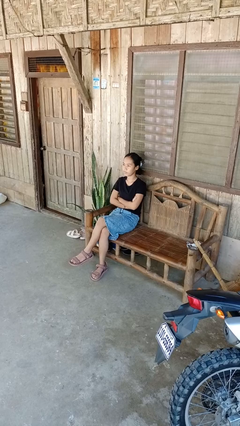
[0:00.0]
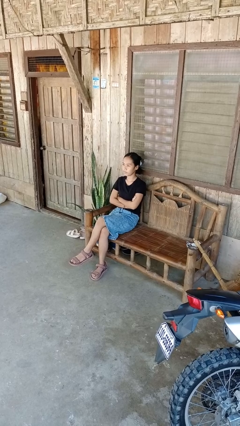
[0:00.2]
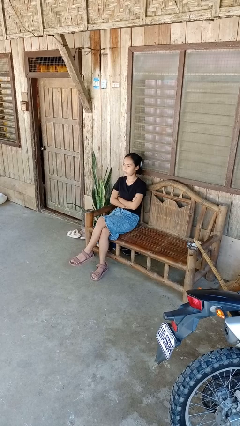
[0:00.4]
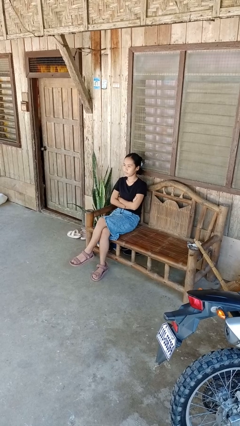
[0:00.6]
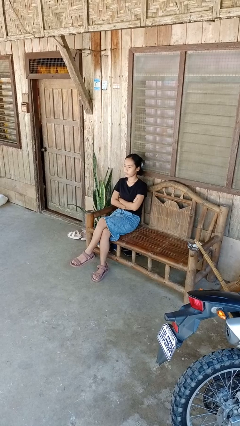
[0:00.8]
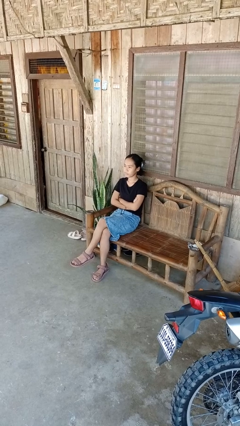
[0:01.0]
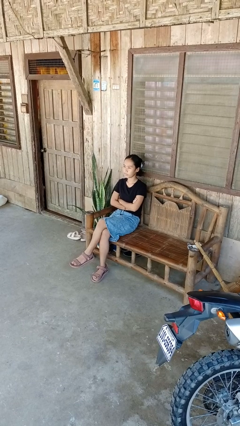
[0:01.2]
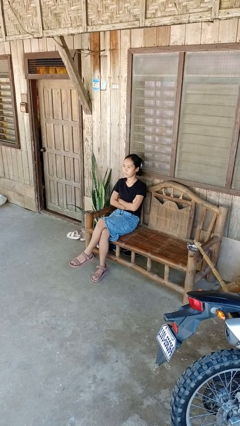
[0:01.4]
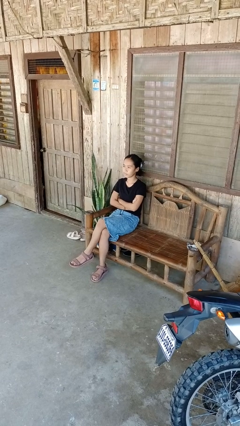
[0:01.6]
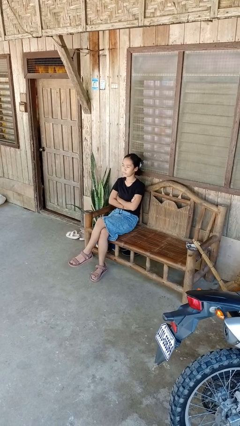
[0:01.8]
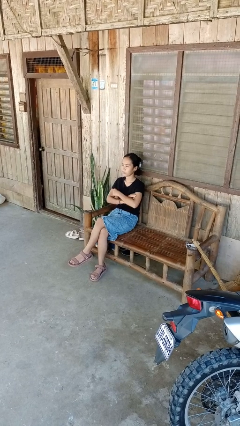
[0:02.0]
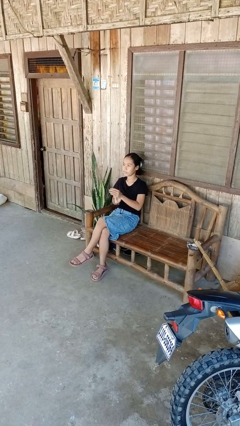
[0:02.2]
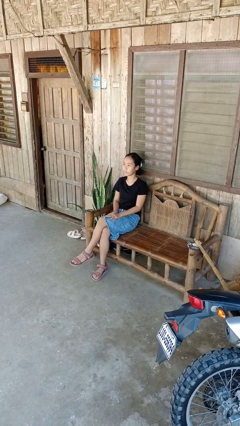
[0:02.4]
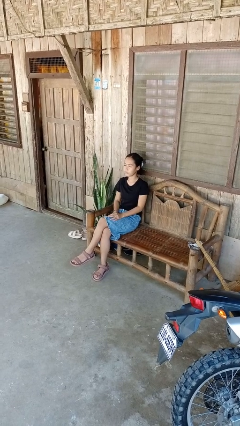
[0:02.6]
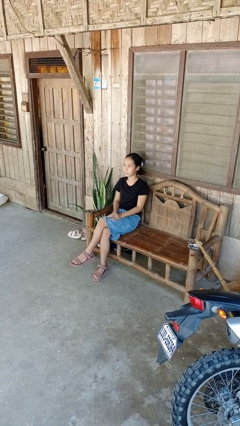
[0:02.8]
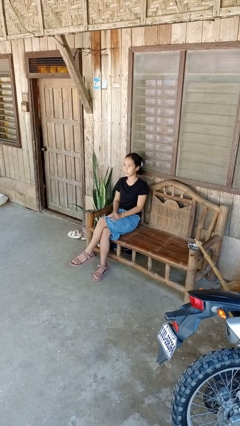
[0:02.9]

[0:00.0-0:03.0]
person crosses arms

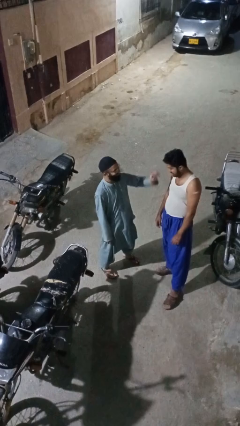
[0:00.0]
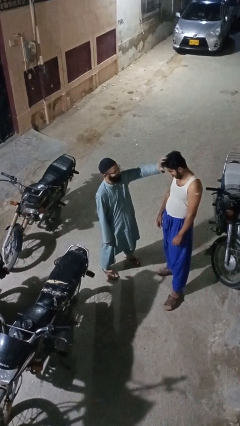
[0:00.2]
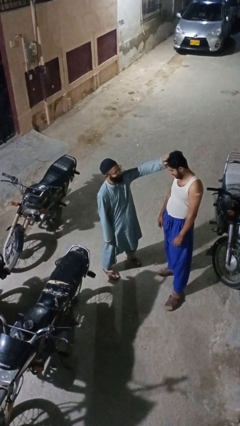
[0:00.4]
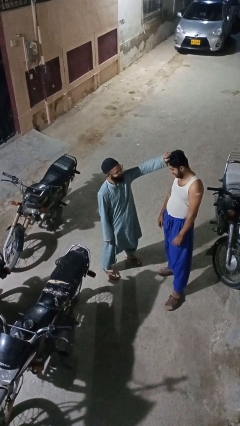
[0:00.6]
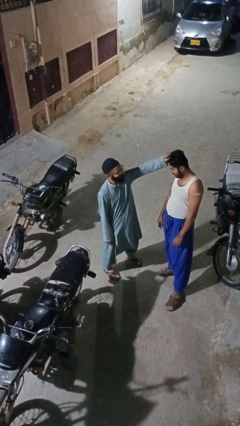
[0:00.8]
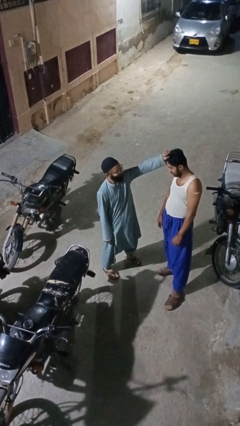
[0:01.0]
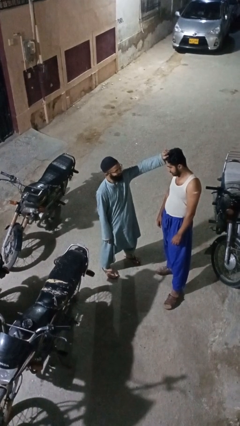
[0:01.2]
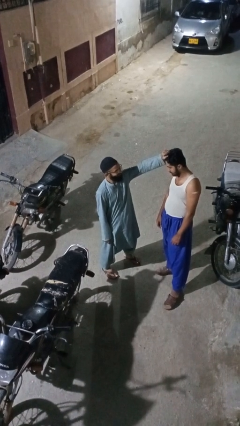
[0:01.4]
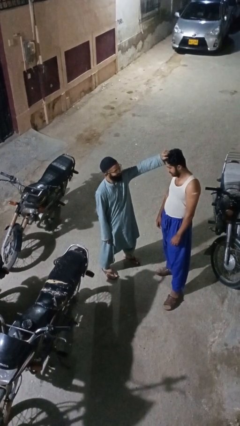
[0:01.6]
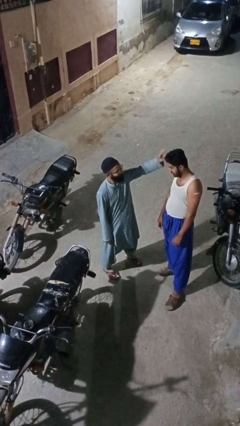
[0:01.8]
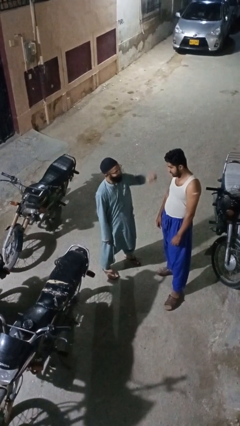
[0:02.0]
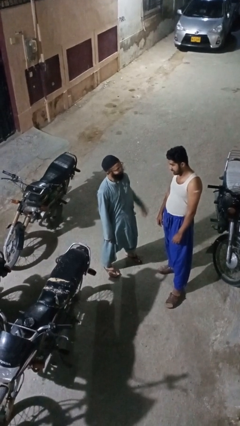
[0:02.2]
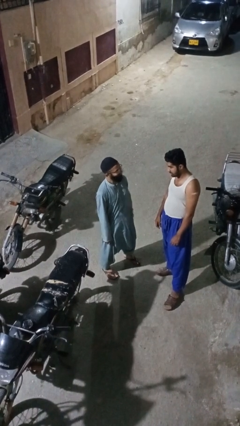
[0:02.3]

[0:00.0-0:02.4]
person grabs person by hair

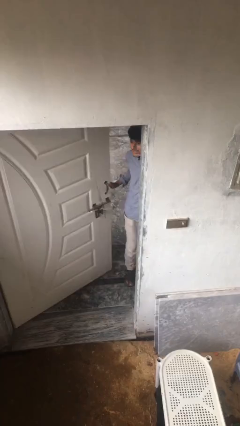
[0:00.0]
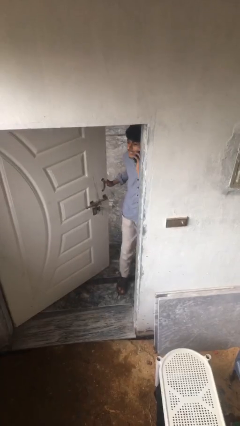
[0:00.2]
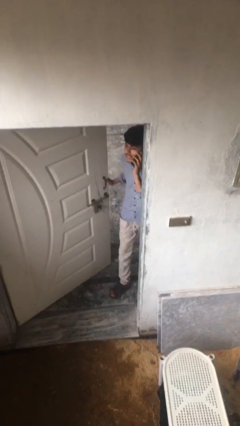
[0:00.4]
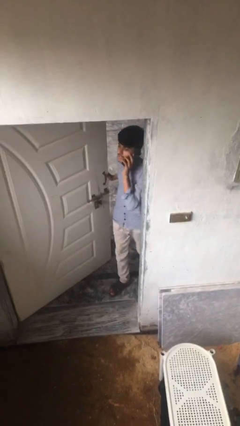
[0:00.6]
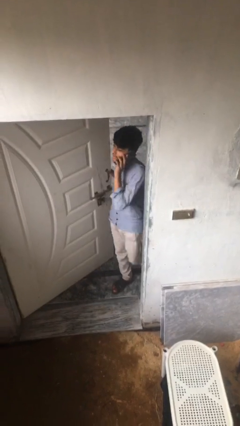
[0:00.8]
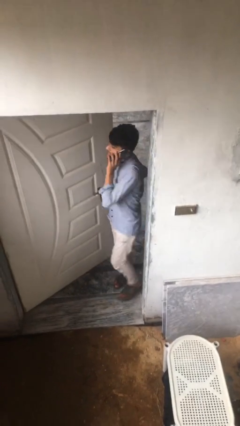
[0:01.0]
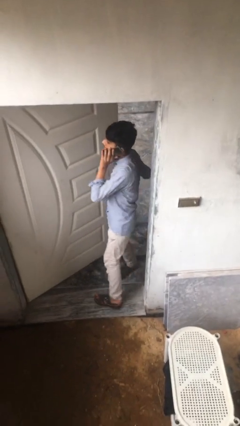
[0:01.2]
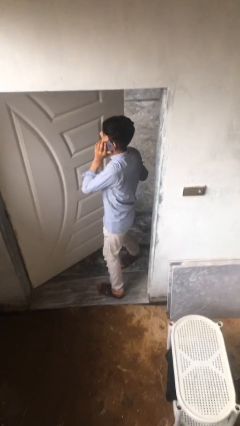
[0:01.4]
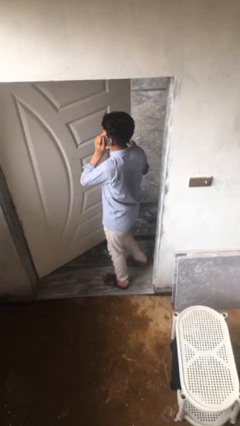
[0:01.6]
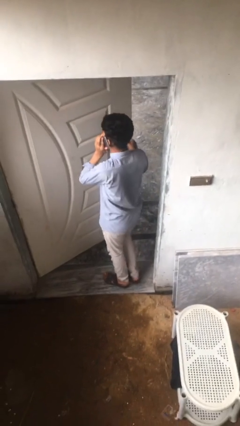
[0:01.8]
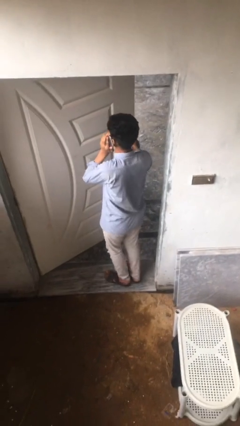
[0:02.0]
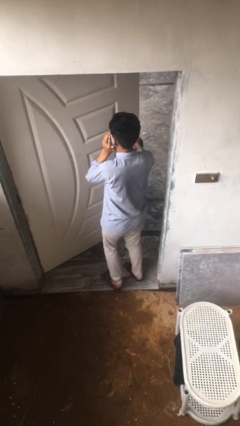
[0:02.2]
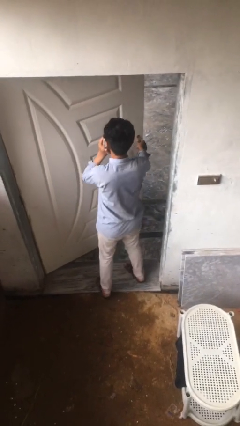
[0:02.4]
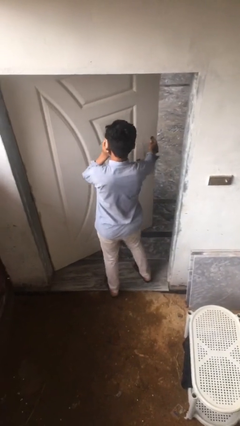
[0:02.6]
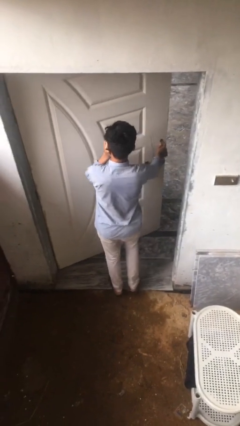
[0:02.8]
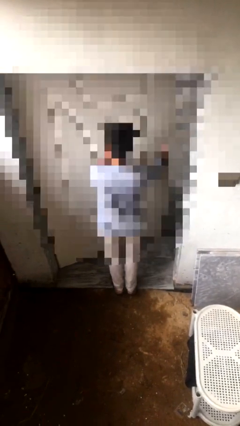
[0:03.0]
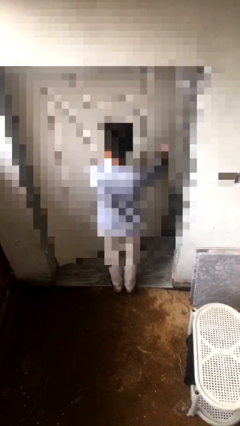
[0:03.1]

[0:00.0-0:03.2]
person enters scene through structure

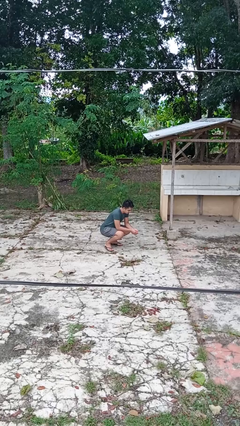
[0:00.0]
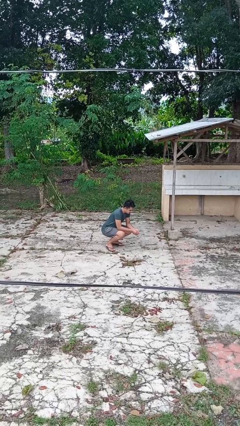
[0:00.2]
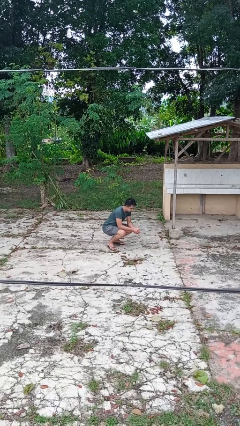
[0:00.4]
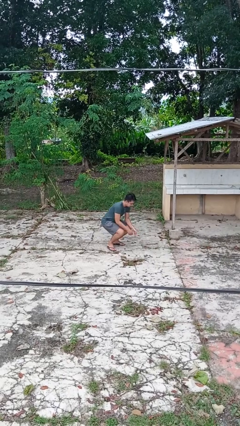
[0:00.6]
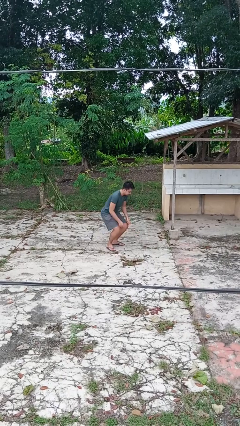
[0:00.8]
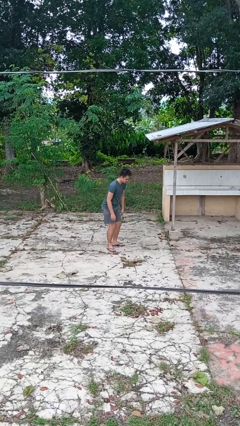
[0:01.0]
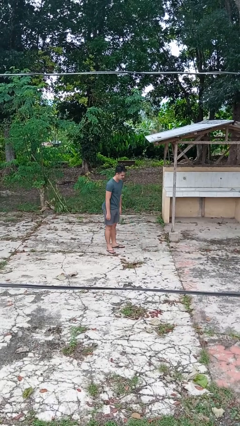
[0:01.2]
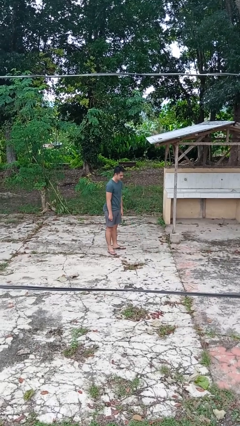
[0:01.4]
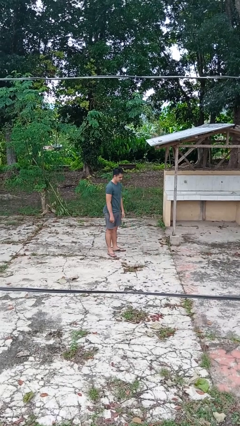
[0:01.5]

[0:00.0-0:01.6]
person stands up

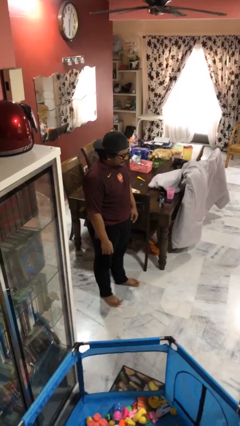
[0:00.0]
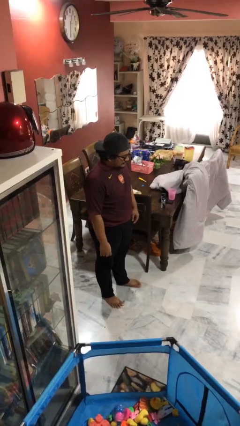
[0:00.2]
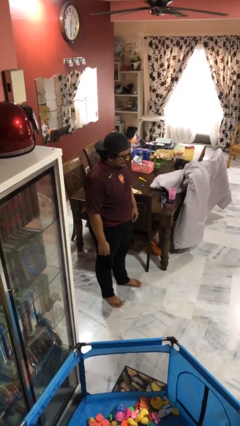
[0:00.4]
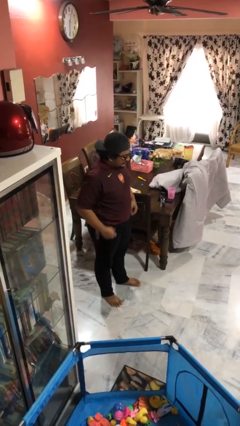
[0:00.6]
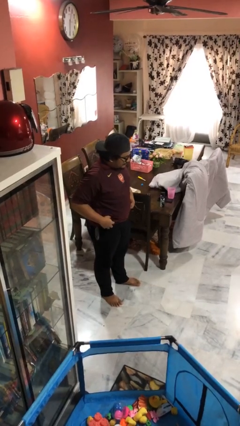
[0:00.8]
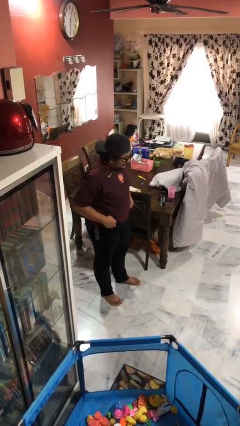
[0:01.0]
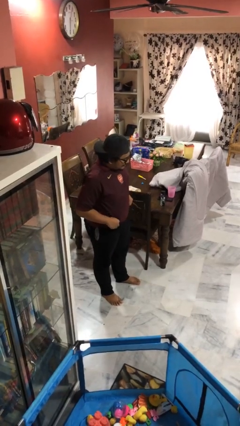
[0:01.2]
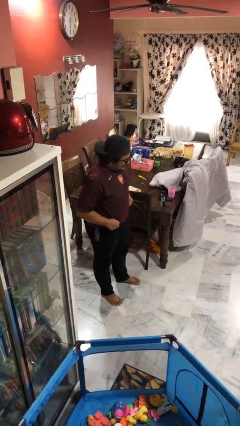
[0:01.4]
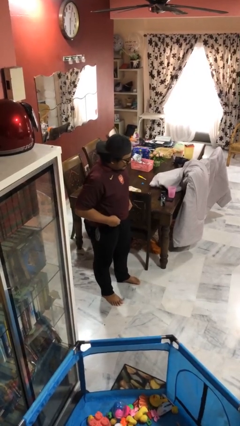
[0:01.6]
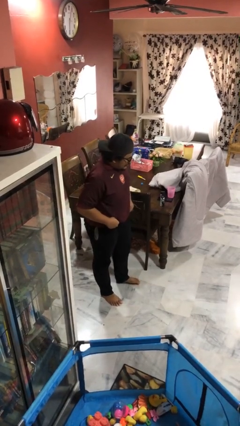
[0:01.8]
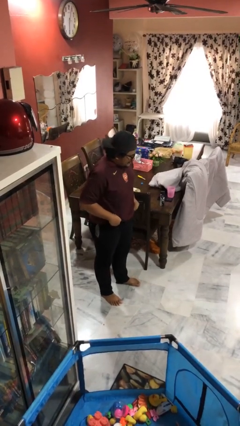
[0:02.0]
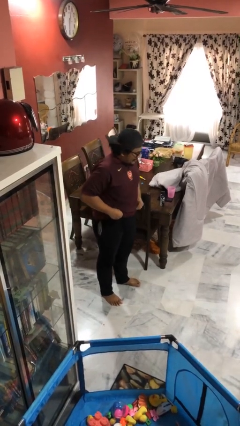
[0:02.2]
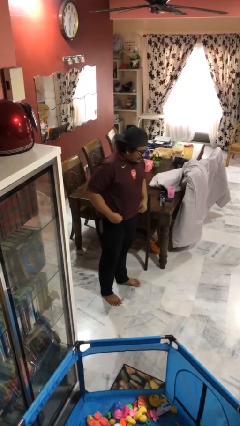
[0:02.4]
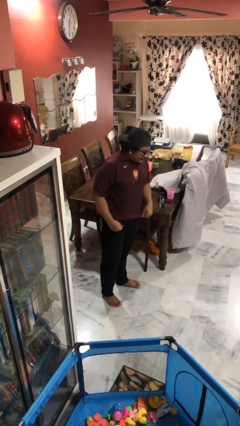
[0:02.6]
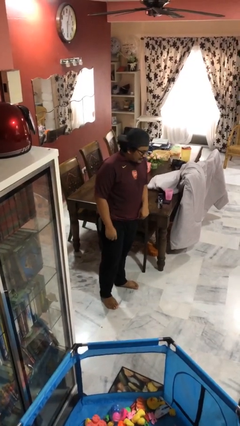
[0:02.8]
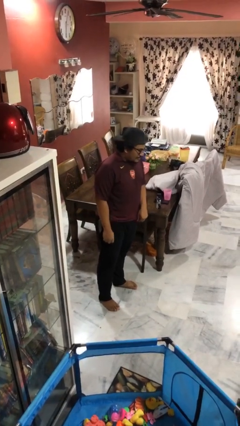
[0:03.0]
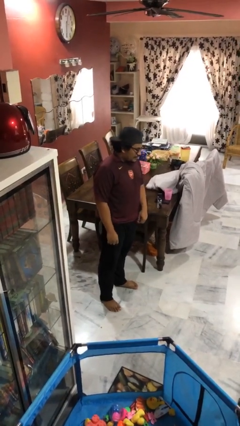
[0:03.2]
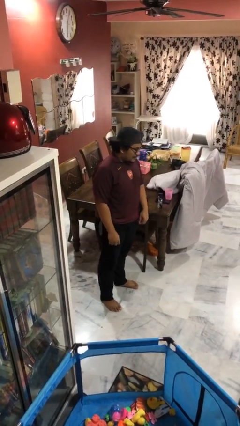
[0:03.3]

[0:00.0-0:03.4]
person hikes up pants

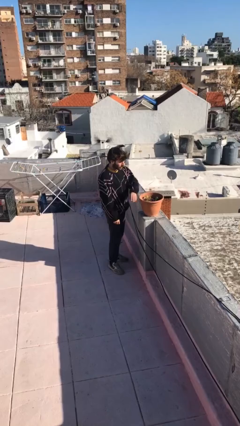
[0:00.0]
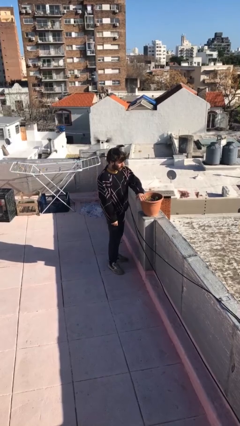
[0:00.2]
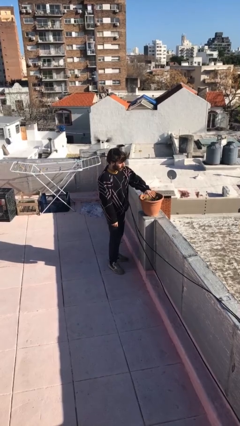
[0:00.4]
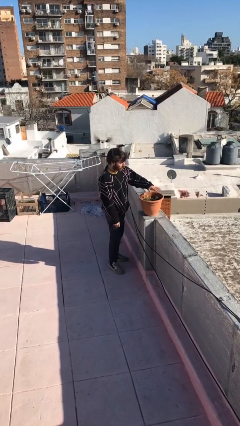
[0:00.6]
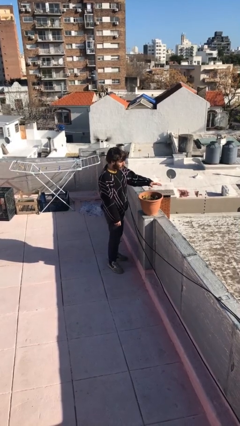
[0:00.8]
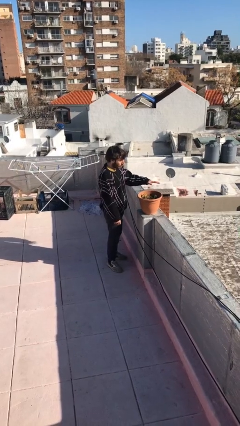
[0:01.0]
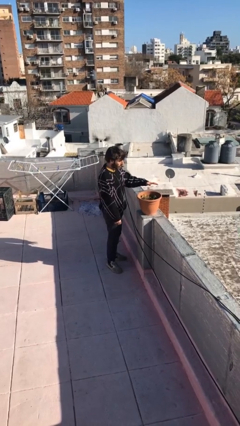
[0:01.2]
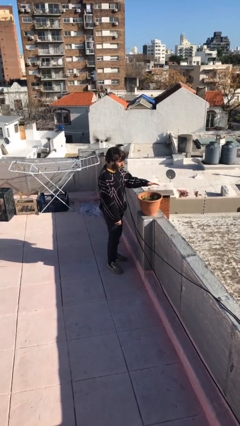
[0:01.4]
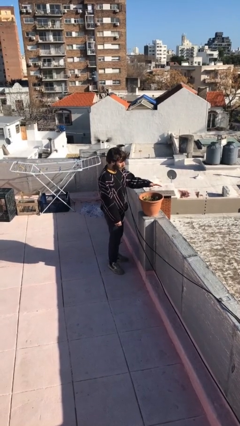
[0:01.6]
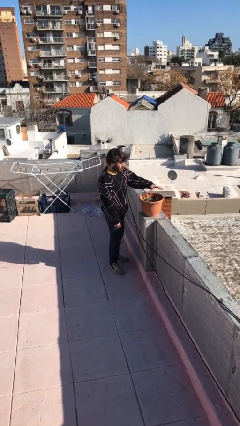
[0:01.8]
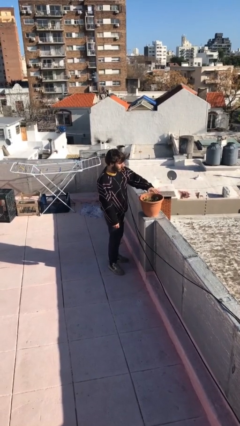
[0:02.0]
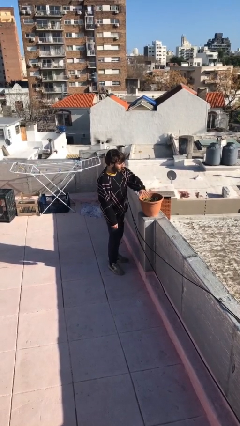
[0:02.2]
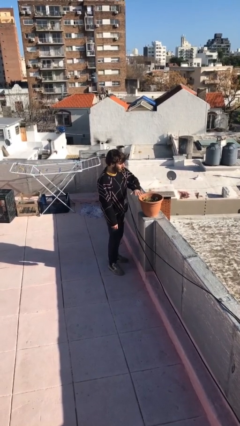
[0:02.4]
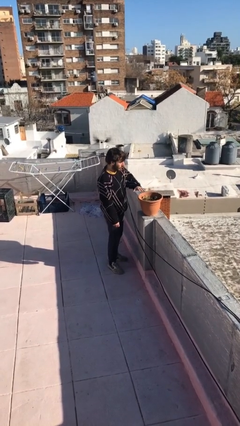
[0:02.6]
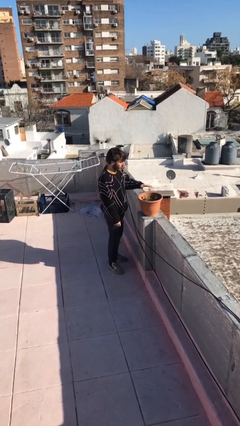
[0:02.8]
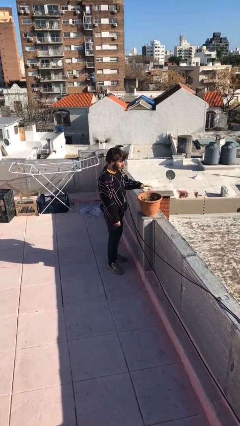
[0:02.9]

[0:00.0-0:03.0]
person waves hand over object

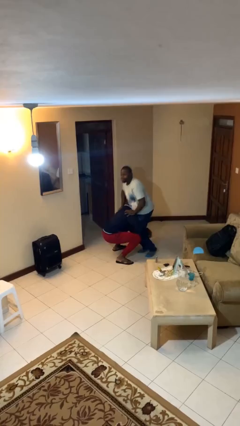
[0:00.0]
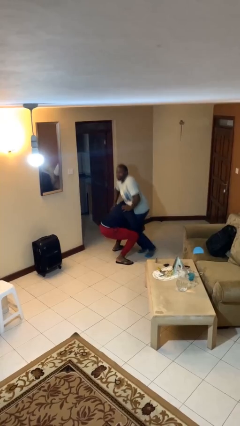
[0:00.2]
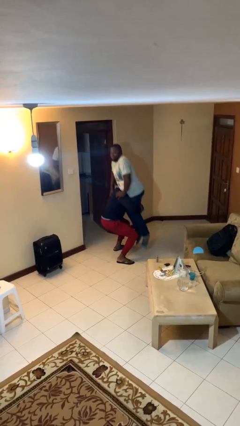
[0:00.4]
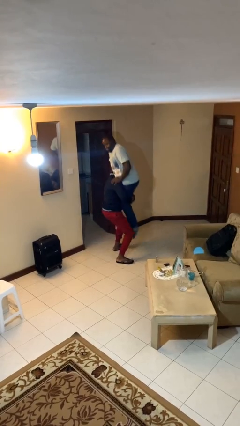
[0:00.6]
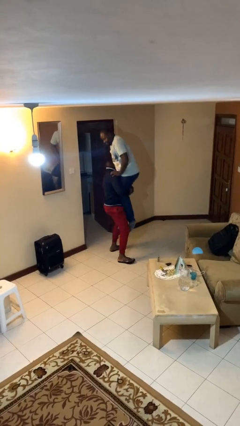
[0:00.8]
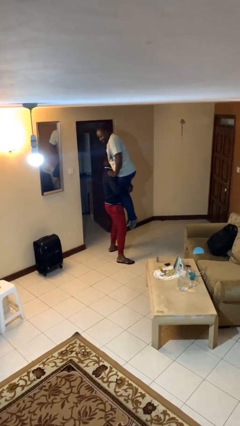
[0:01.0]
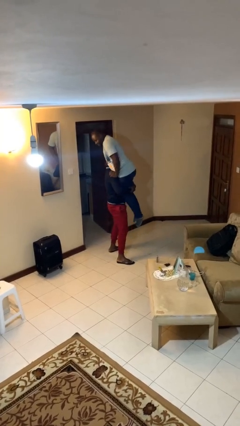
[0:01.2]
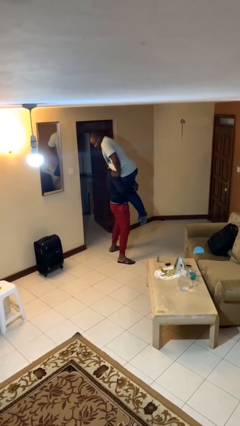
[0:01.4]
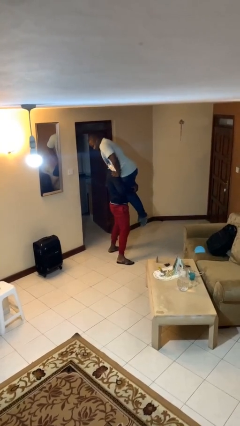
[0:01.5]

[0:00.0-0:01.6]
person picks up person
